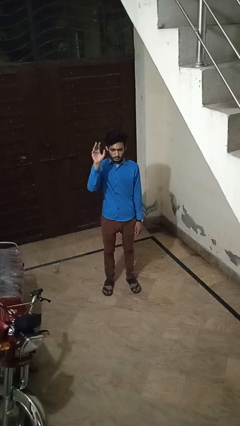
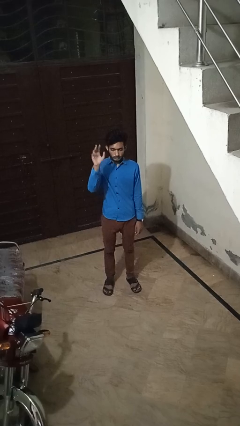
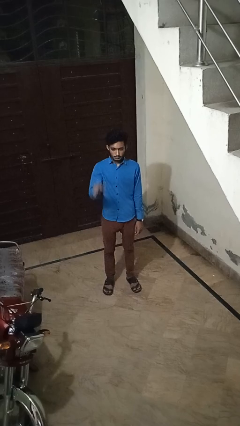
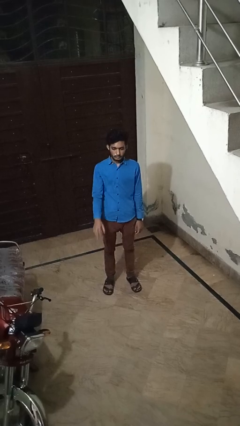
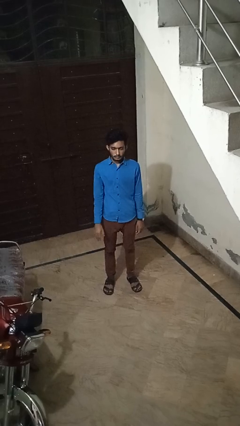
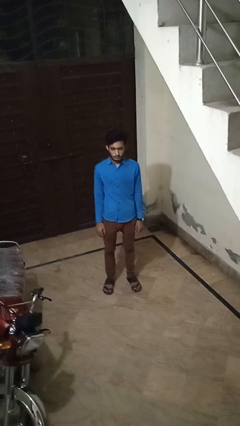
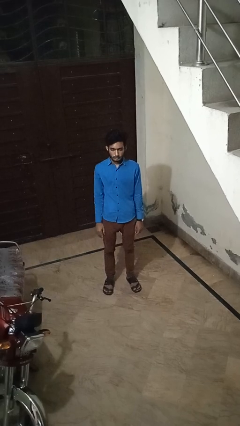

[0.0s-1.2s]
person gestures lower hand

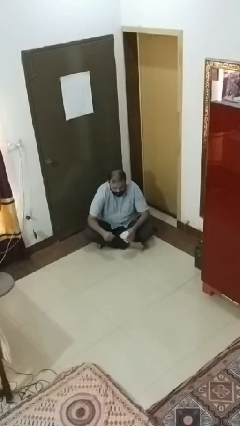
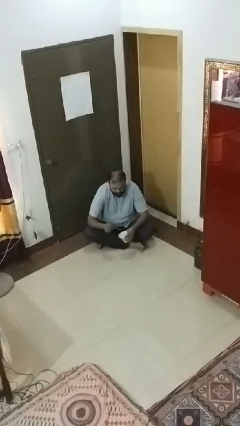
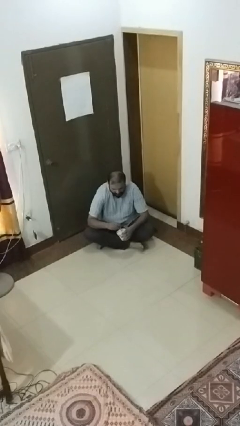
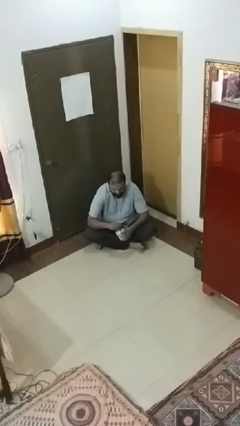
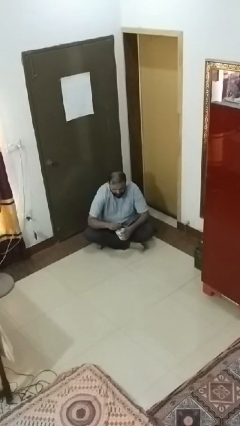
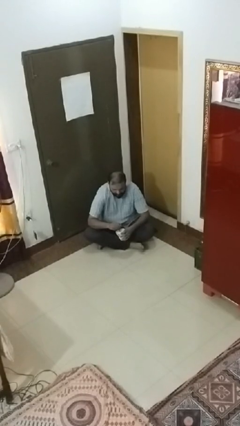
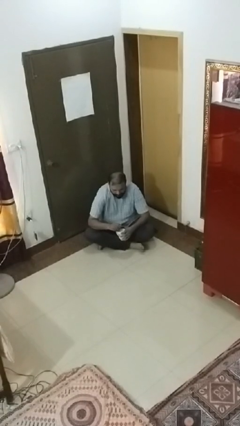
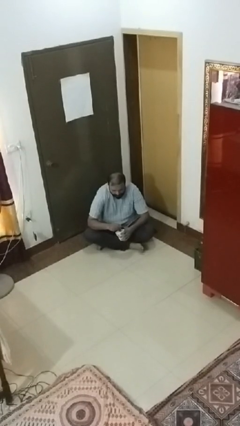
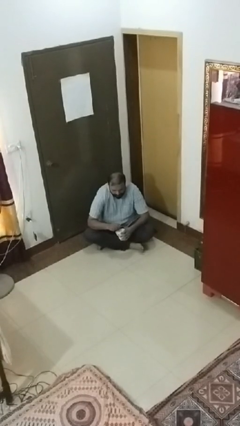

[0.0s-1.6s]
person stirs mug

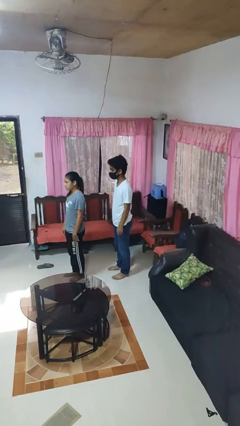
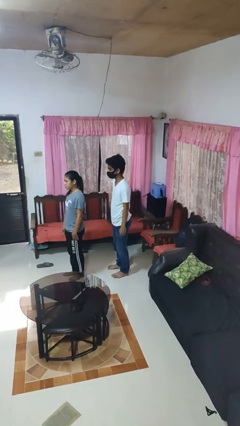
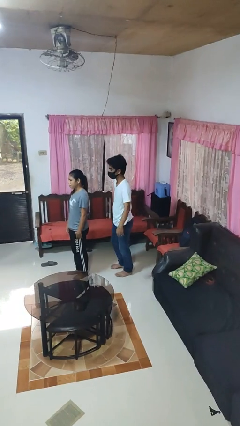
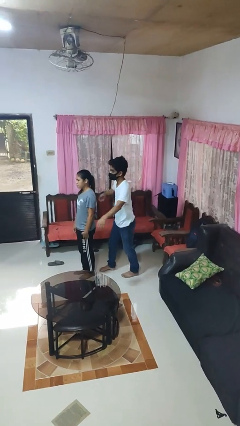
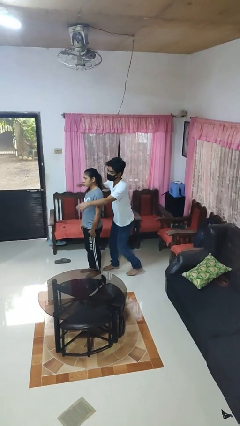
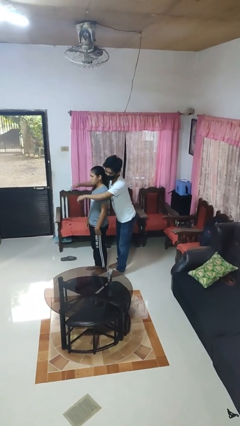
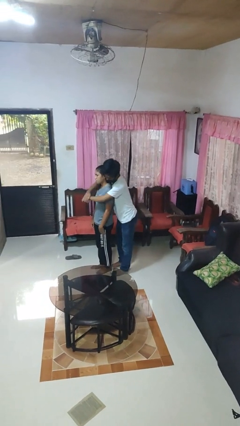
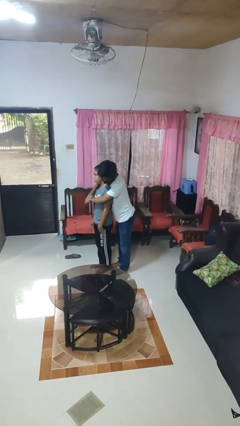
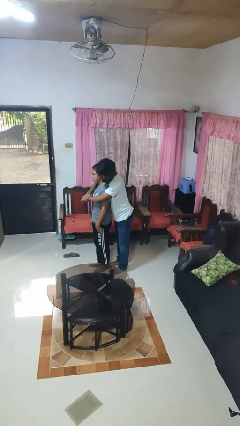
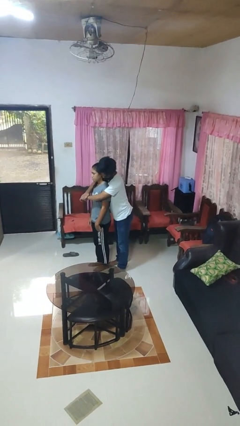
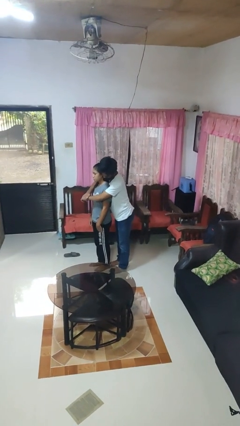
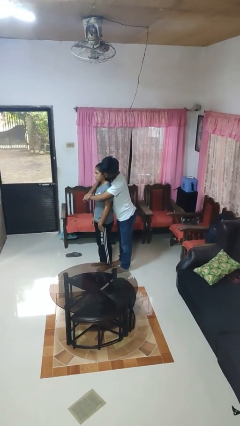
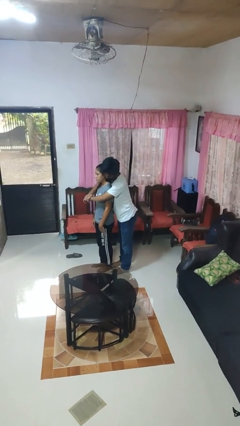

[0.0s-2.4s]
person hugs person from behind

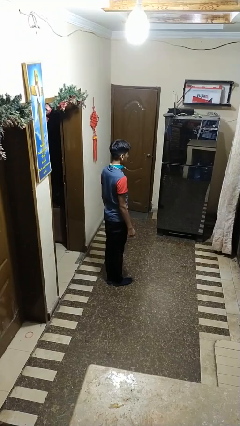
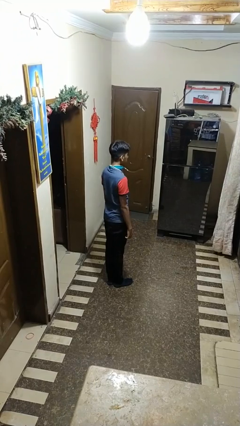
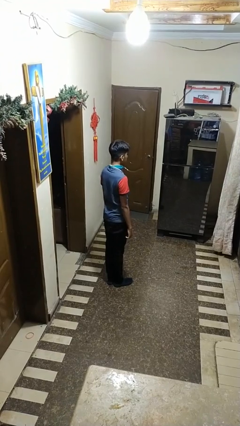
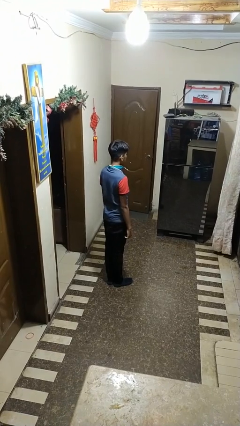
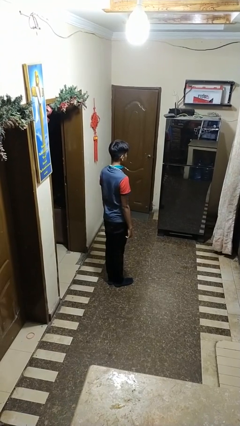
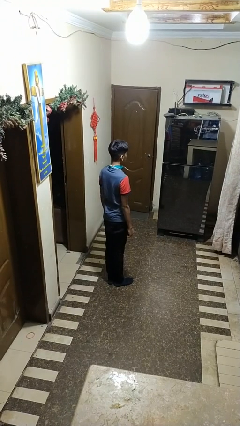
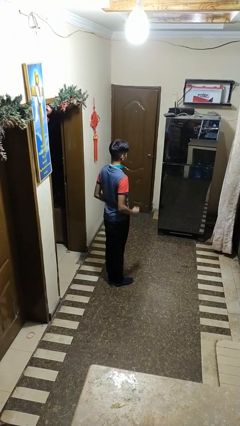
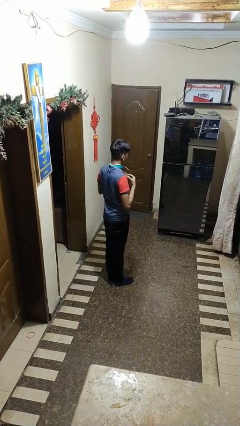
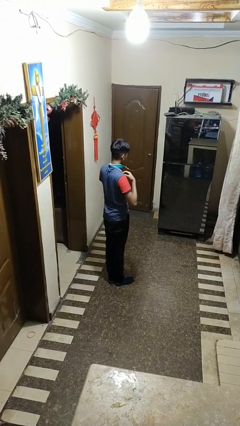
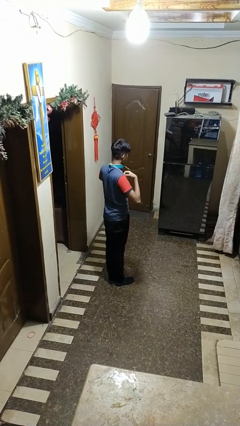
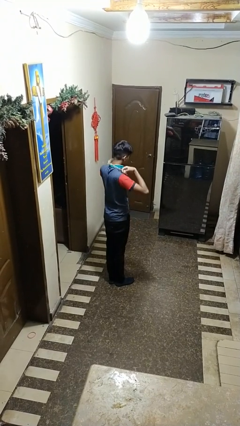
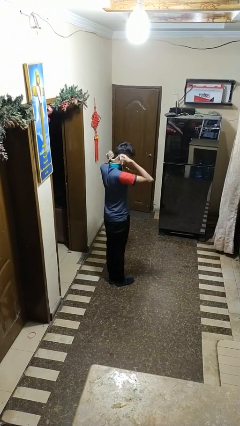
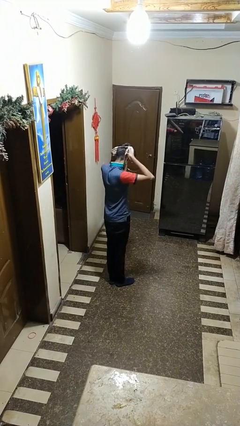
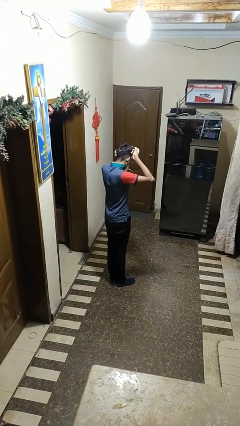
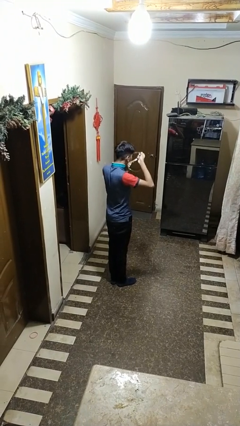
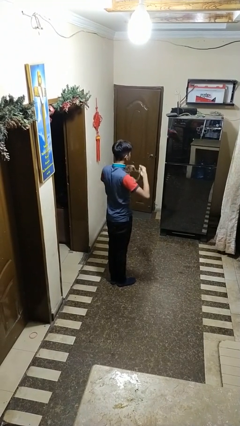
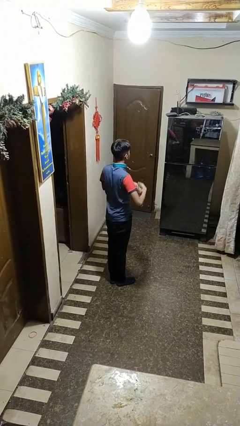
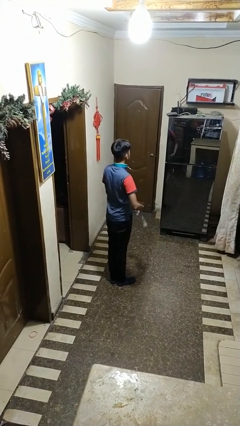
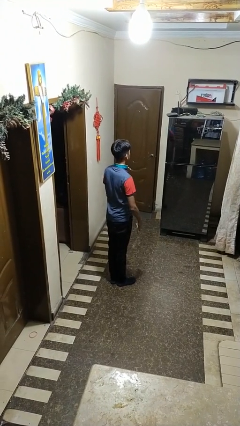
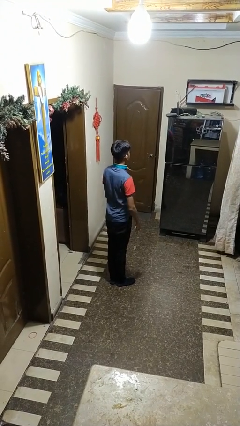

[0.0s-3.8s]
person takes off necklace

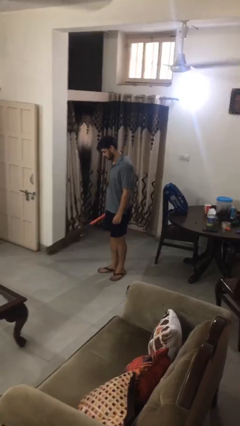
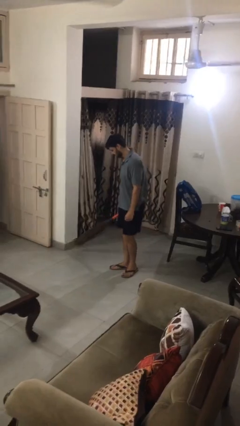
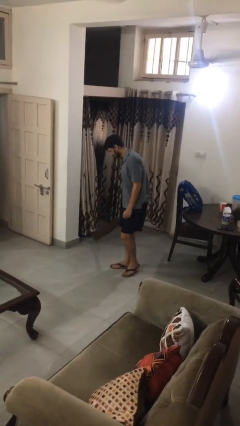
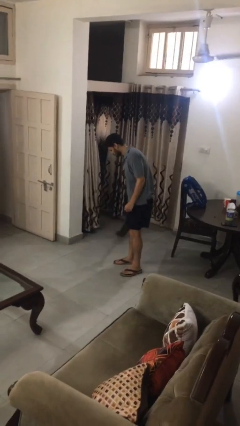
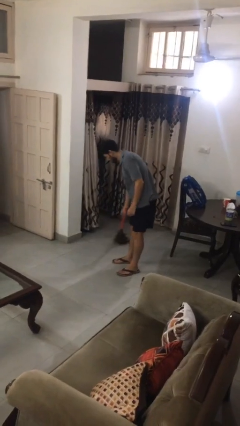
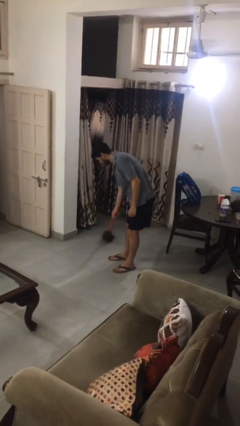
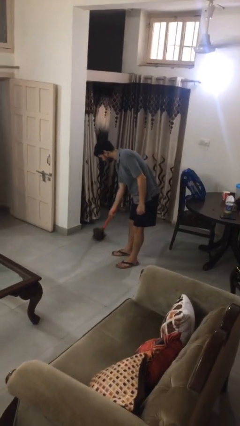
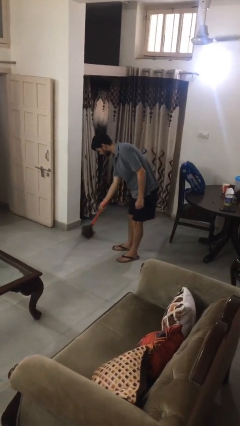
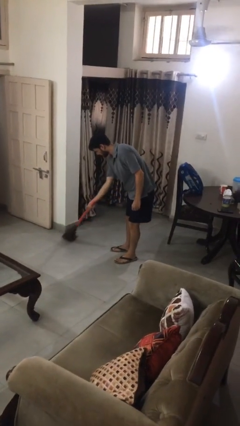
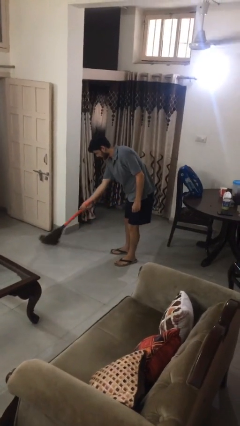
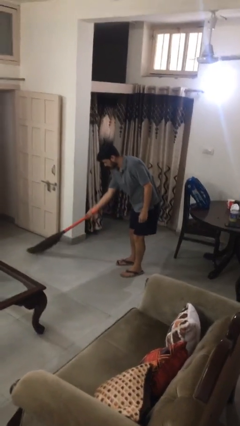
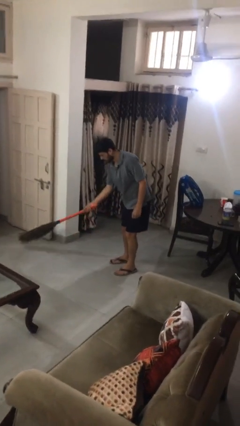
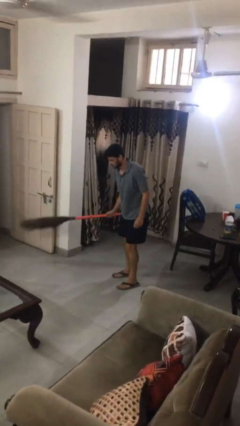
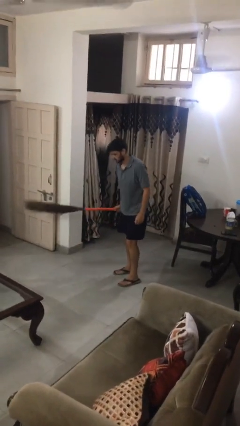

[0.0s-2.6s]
person sweeps floor

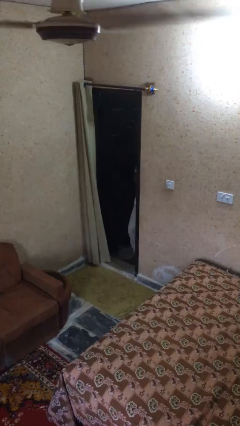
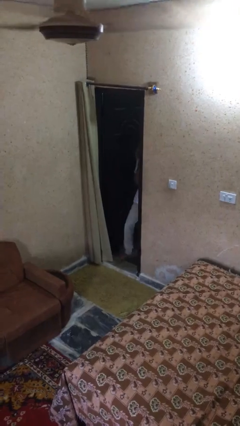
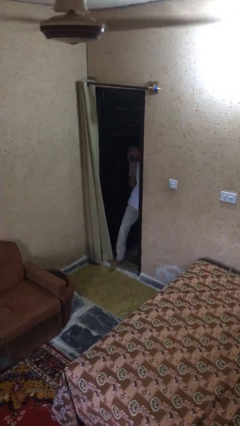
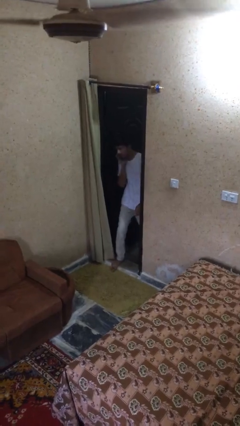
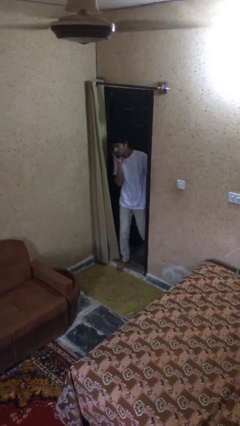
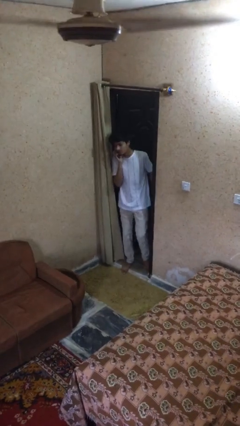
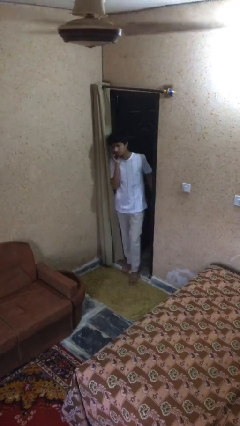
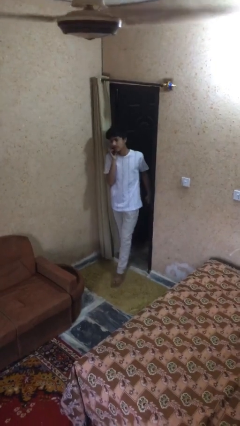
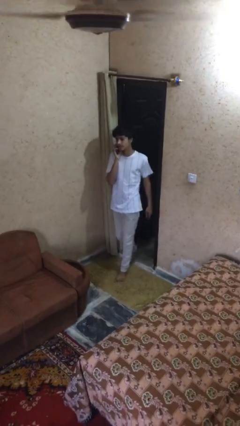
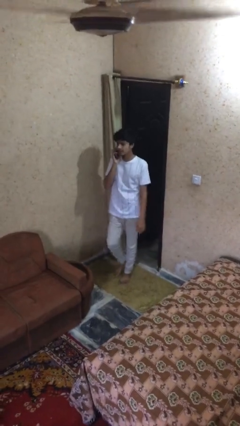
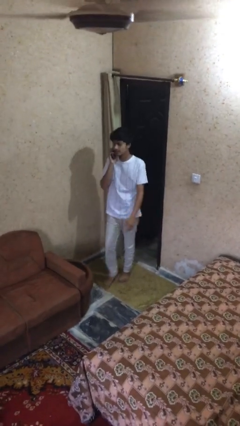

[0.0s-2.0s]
person enters scene through structure

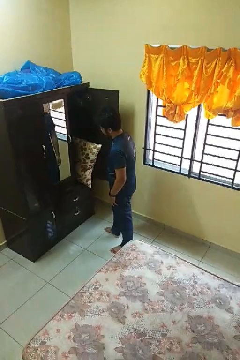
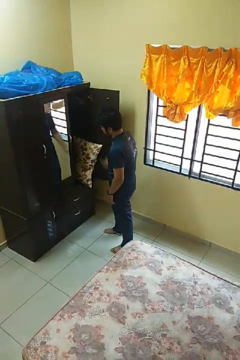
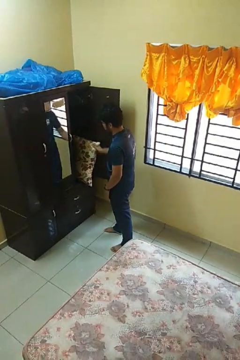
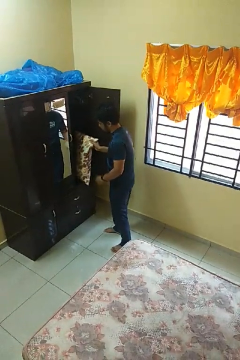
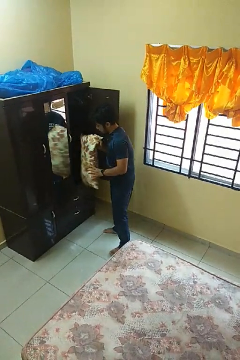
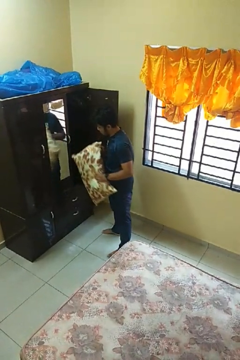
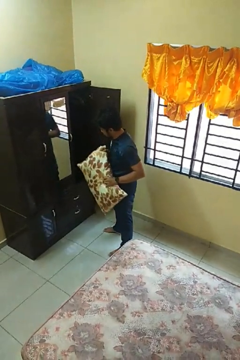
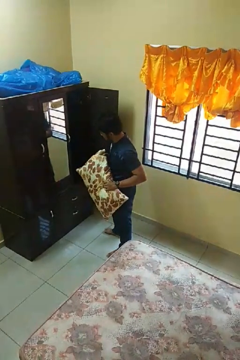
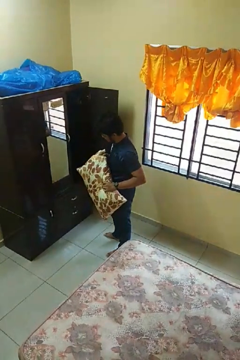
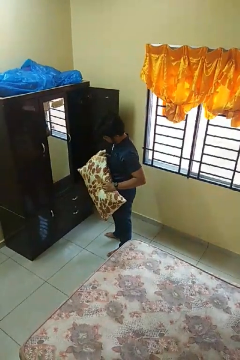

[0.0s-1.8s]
person picks up object from cabinet

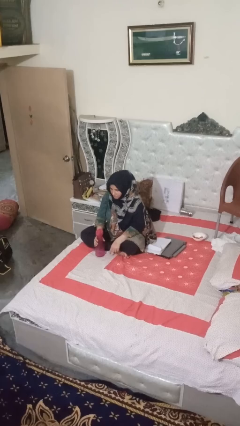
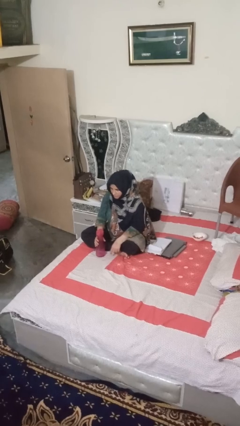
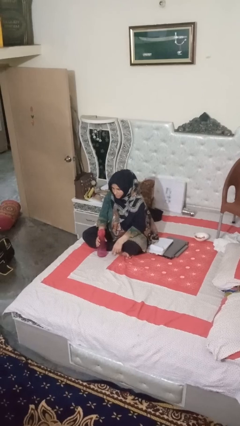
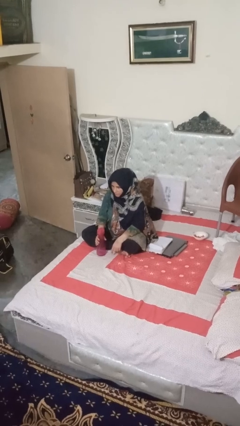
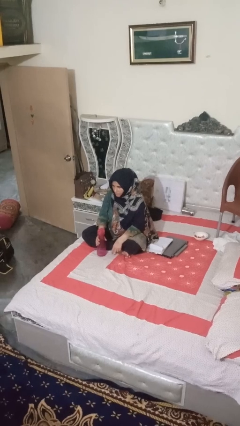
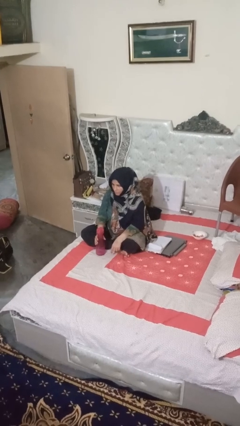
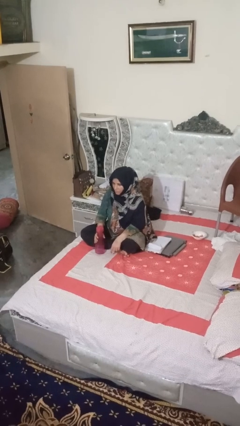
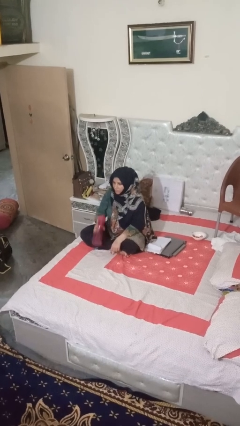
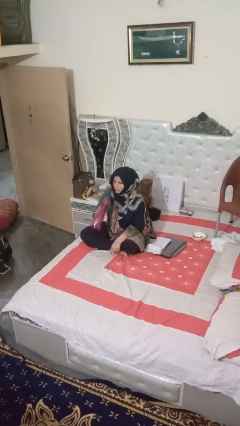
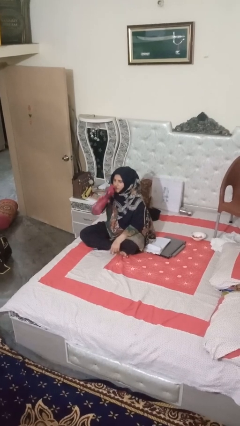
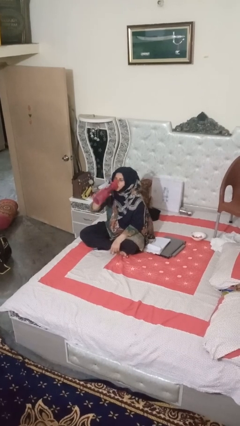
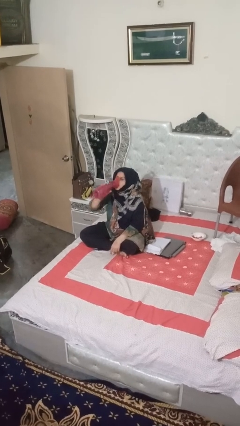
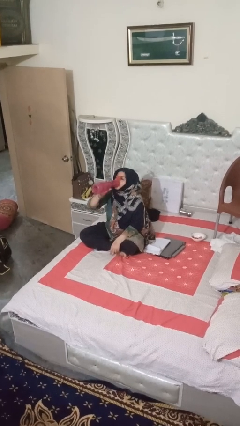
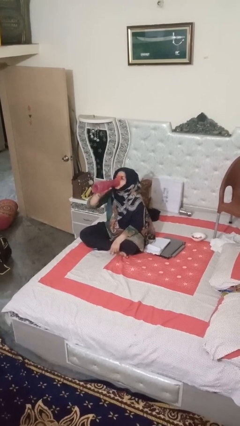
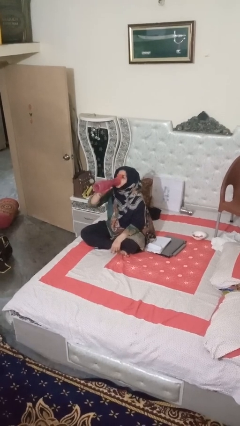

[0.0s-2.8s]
person drinks from bottle
